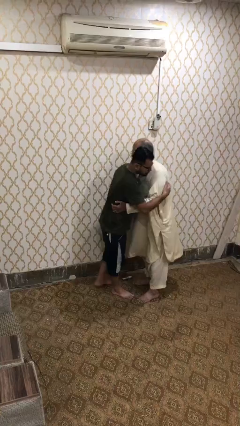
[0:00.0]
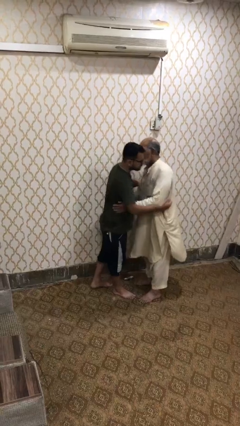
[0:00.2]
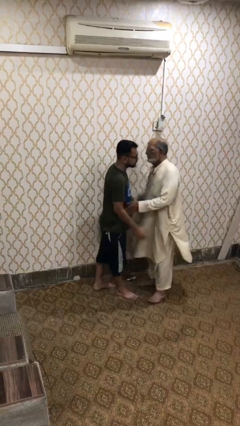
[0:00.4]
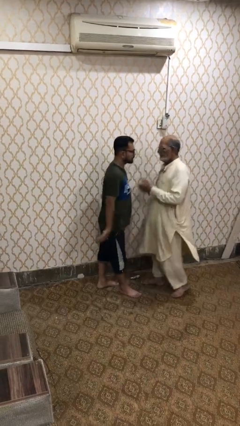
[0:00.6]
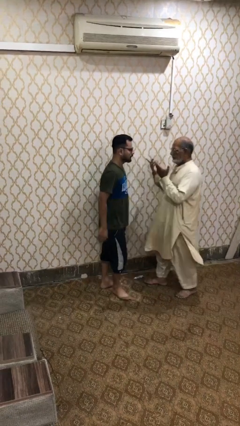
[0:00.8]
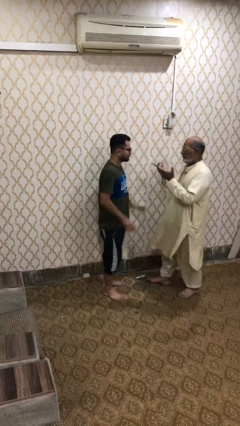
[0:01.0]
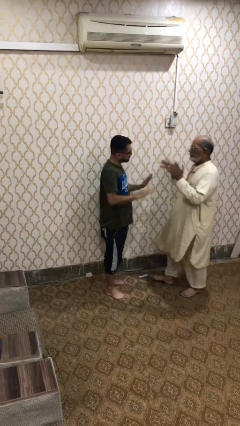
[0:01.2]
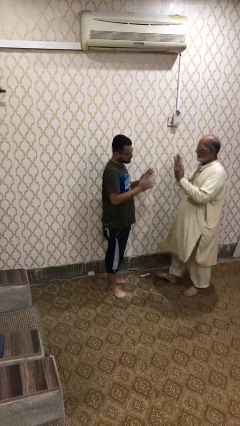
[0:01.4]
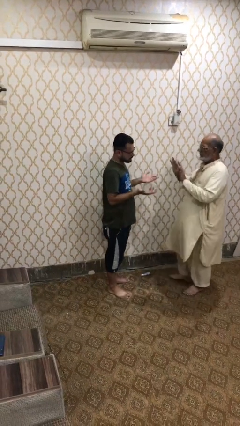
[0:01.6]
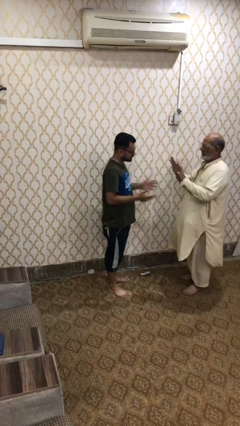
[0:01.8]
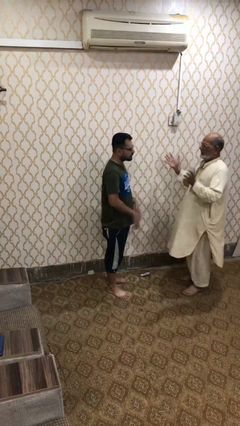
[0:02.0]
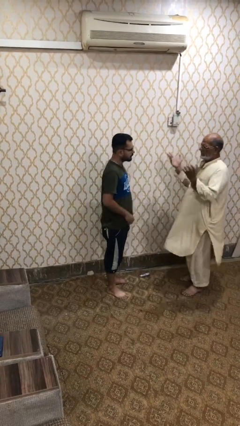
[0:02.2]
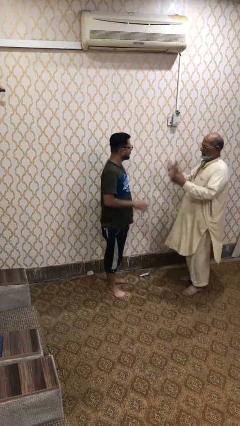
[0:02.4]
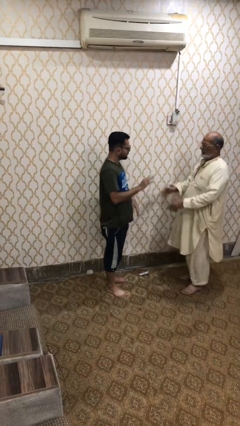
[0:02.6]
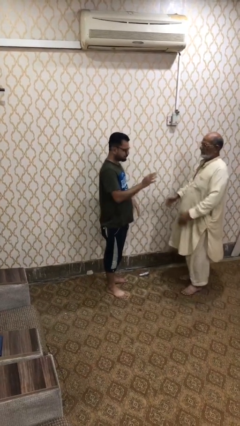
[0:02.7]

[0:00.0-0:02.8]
person talks to person

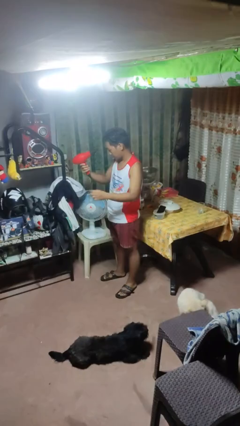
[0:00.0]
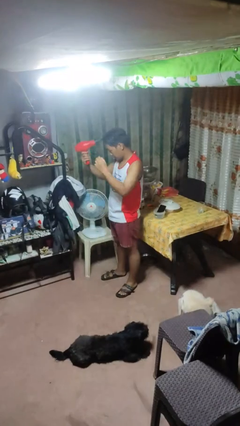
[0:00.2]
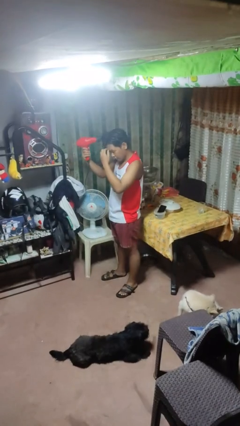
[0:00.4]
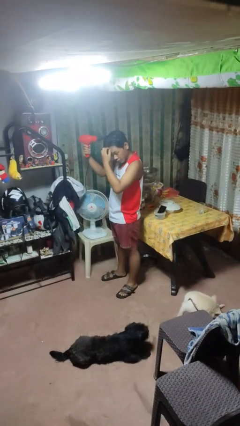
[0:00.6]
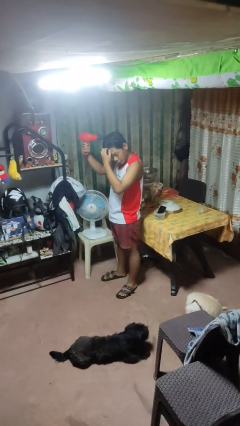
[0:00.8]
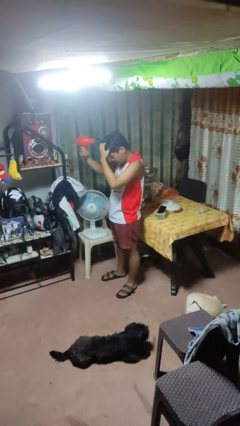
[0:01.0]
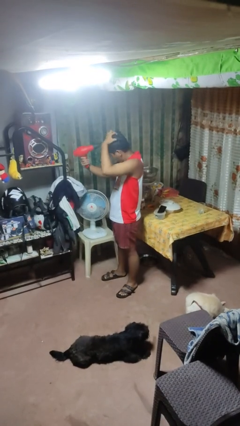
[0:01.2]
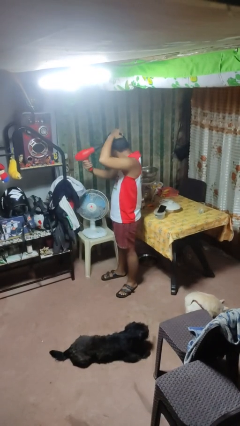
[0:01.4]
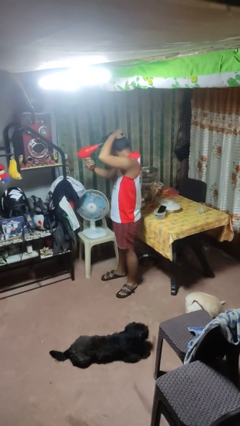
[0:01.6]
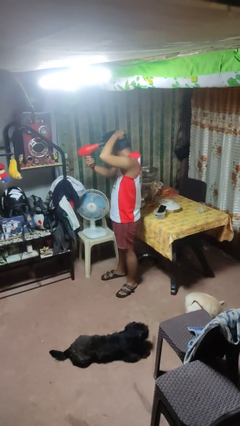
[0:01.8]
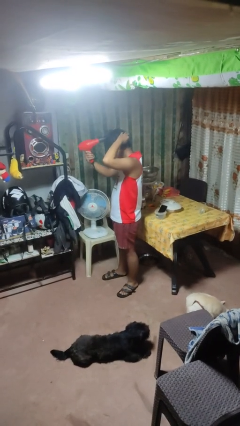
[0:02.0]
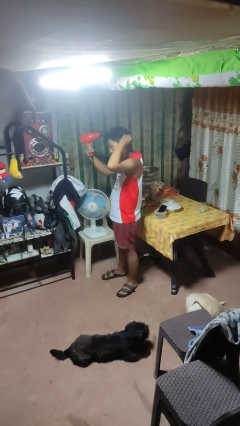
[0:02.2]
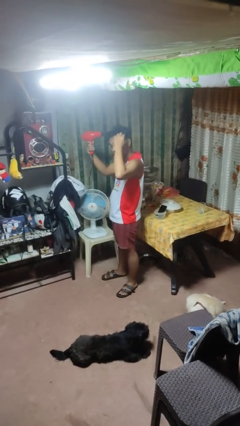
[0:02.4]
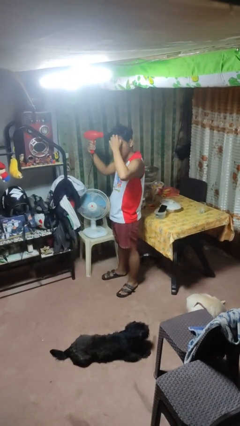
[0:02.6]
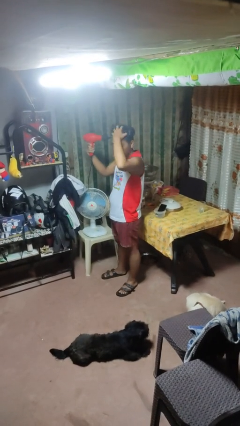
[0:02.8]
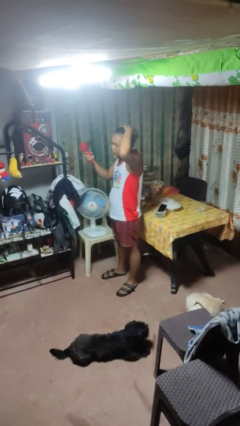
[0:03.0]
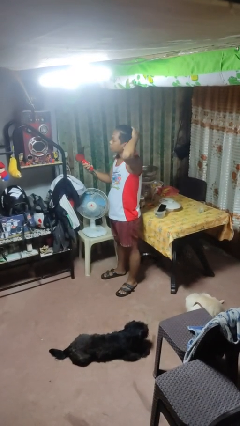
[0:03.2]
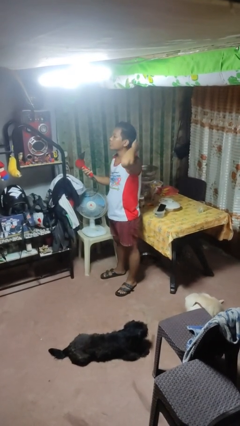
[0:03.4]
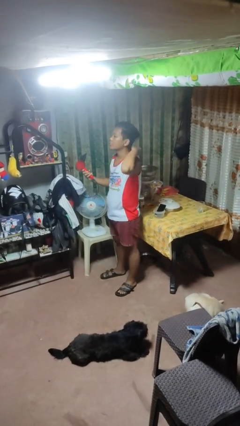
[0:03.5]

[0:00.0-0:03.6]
person dries hair with hairdryer

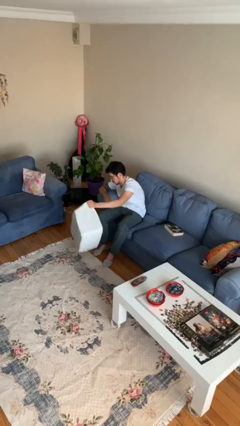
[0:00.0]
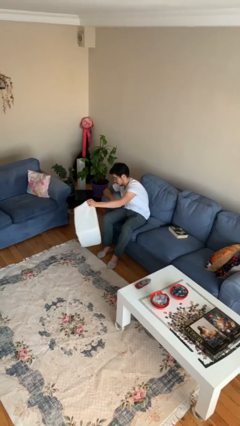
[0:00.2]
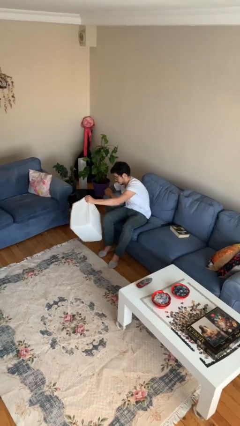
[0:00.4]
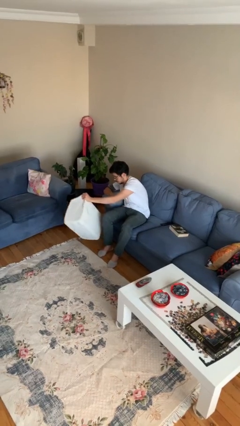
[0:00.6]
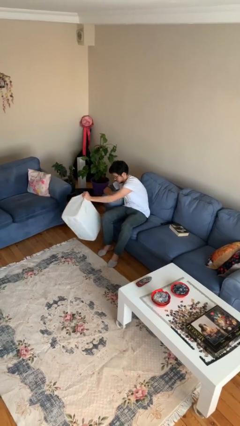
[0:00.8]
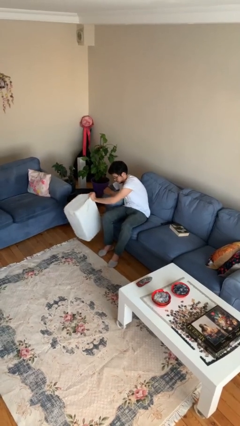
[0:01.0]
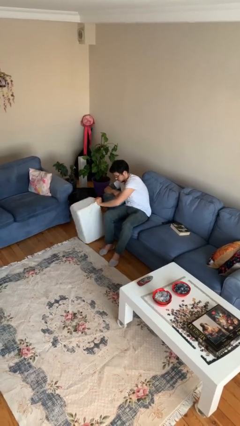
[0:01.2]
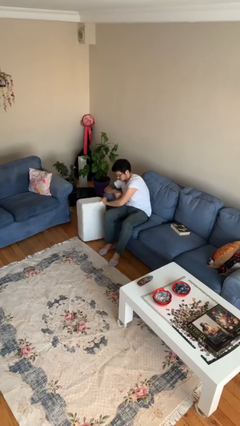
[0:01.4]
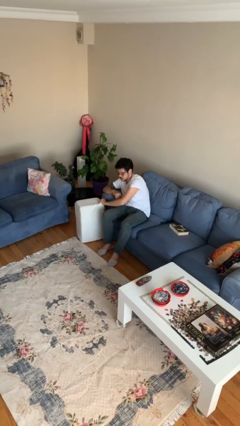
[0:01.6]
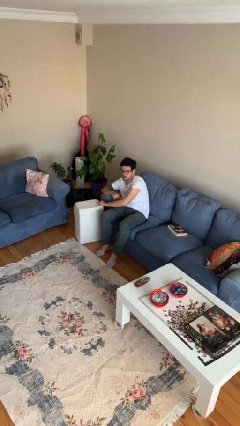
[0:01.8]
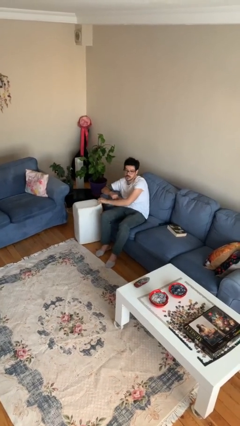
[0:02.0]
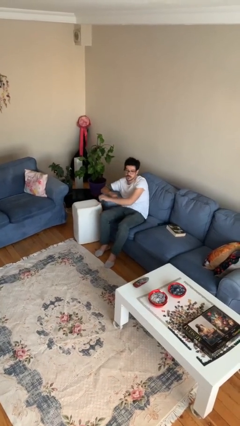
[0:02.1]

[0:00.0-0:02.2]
person puts down object on floor

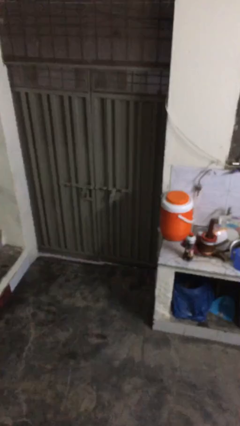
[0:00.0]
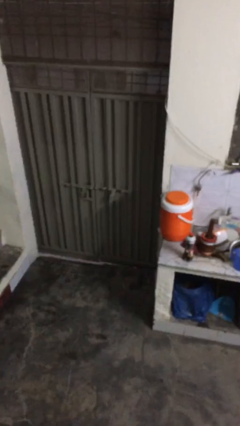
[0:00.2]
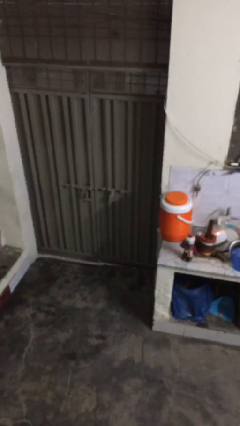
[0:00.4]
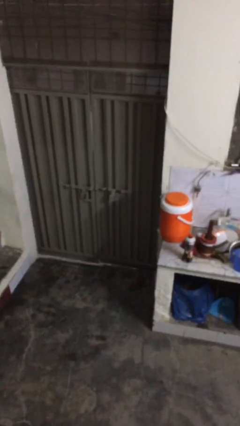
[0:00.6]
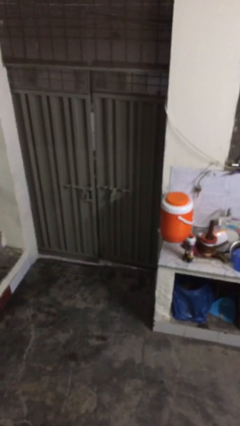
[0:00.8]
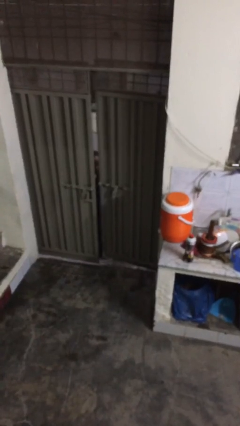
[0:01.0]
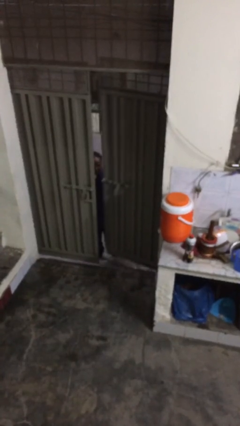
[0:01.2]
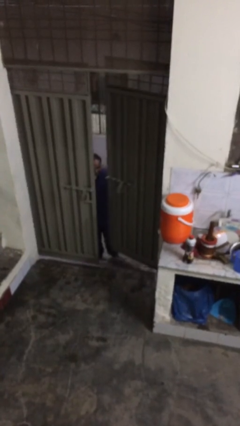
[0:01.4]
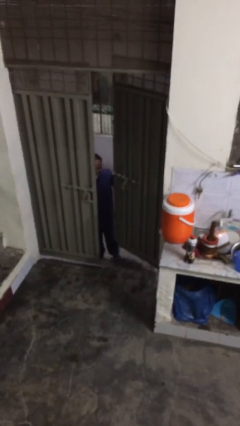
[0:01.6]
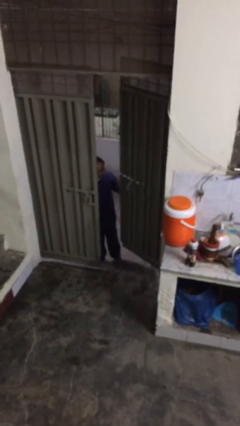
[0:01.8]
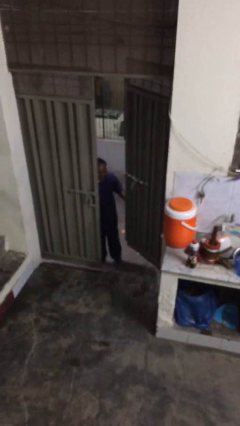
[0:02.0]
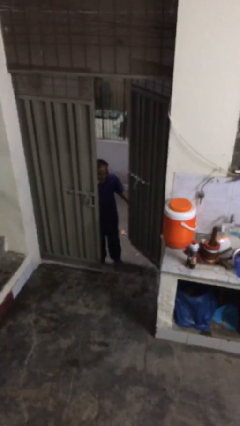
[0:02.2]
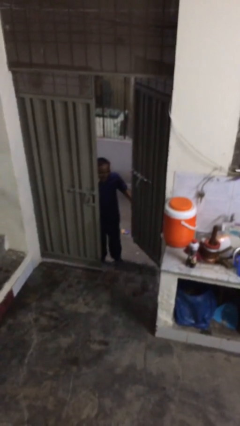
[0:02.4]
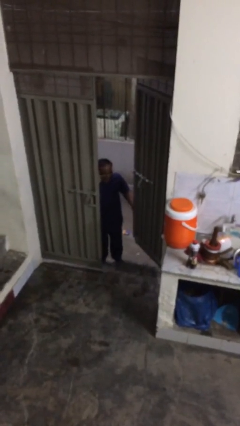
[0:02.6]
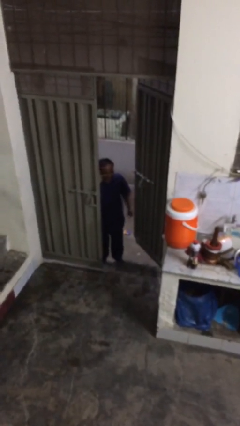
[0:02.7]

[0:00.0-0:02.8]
person opens facility door

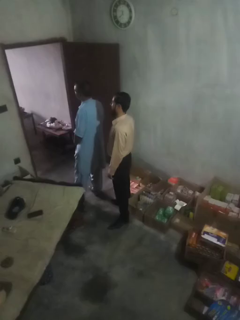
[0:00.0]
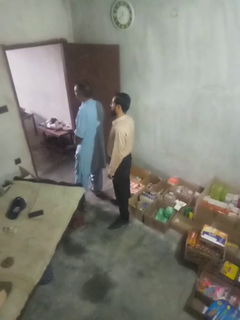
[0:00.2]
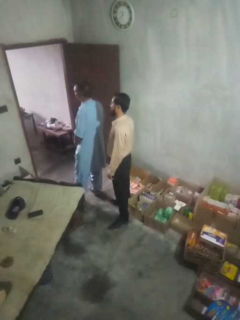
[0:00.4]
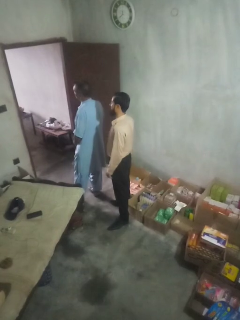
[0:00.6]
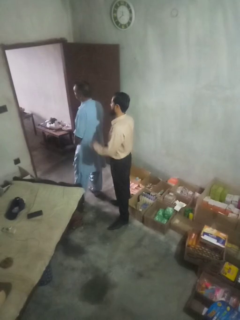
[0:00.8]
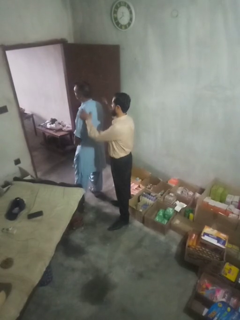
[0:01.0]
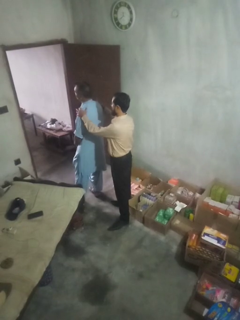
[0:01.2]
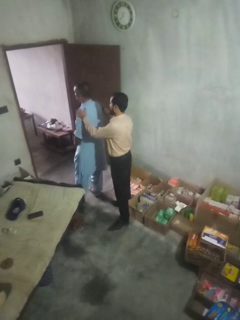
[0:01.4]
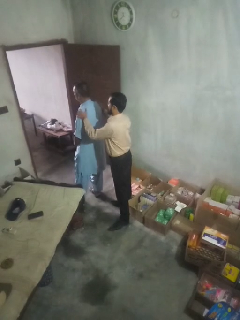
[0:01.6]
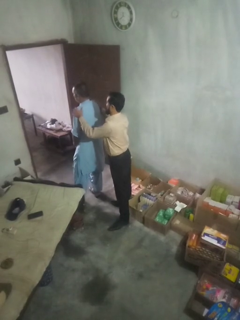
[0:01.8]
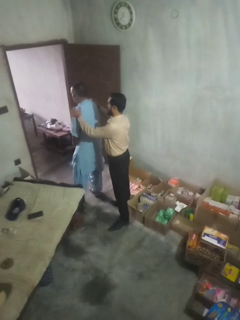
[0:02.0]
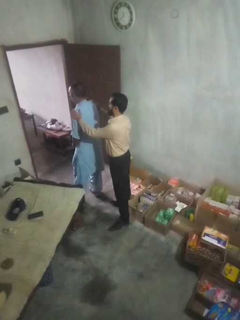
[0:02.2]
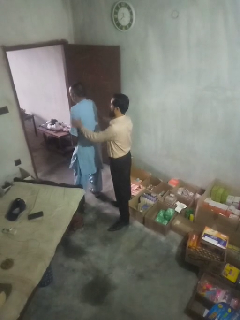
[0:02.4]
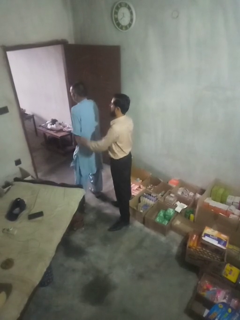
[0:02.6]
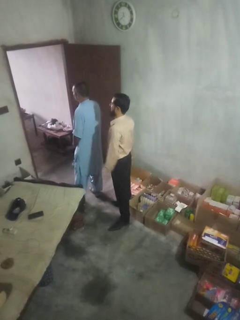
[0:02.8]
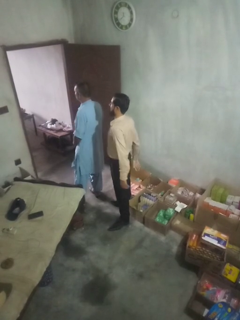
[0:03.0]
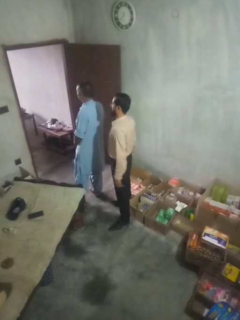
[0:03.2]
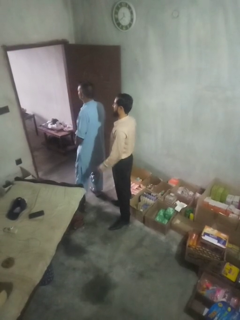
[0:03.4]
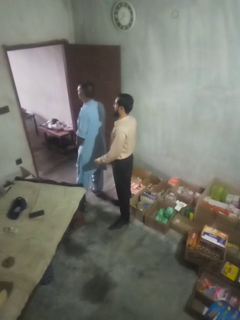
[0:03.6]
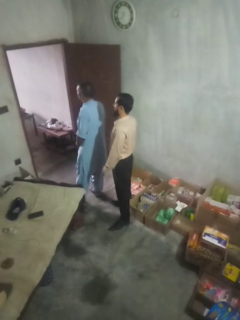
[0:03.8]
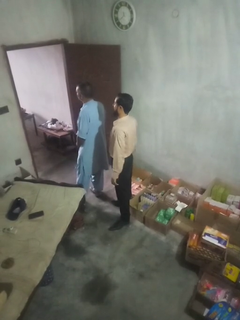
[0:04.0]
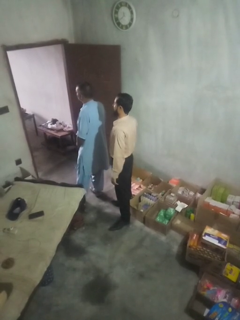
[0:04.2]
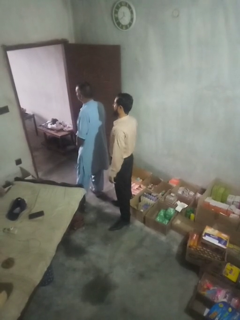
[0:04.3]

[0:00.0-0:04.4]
person pounds shoulders of person

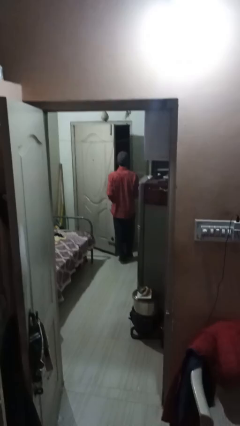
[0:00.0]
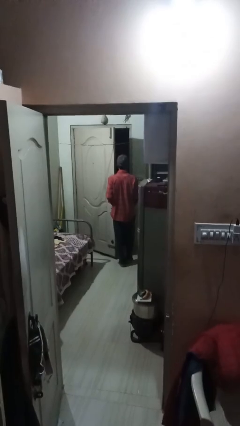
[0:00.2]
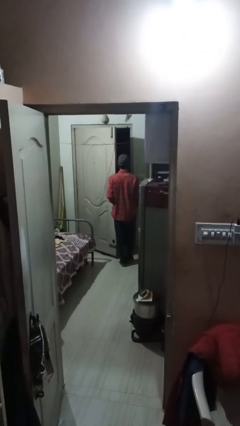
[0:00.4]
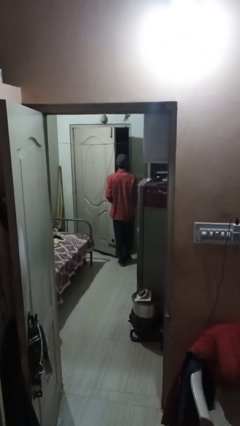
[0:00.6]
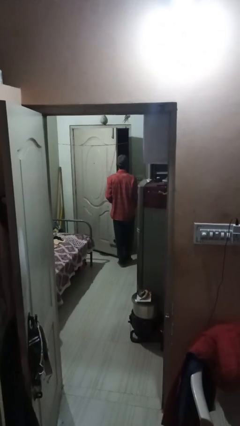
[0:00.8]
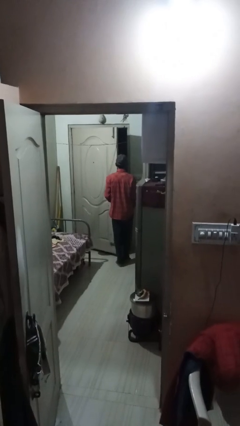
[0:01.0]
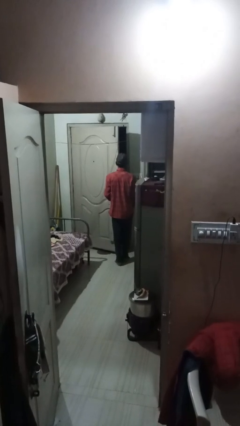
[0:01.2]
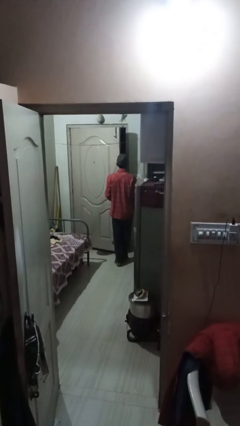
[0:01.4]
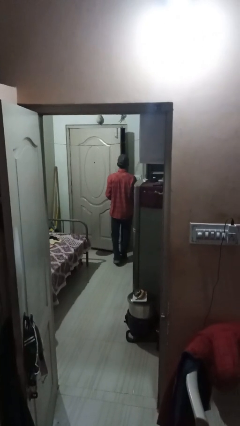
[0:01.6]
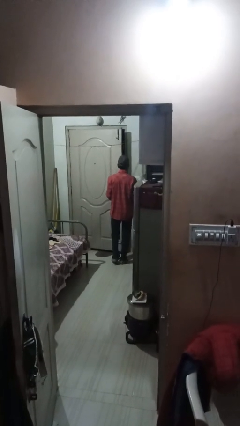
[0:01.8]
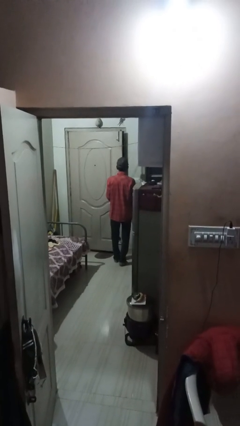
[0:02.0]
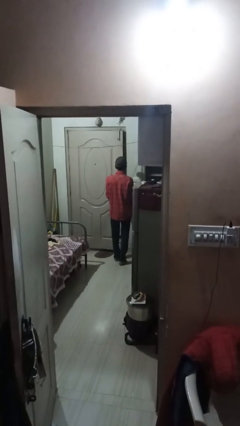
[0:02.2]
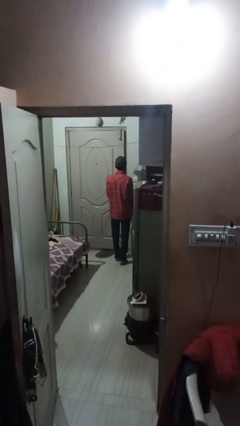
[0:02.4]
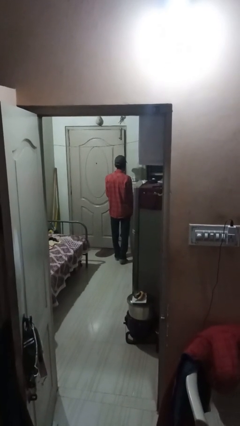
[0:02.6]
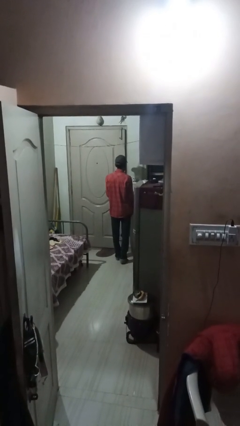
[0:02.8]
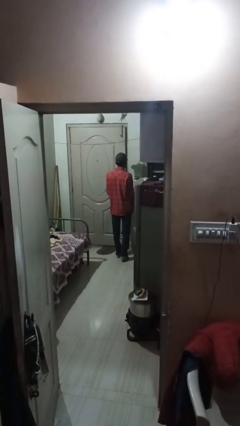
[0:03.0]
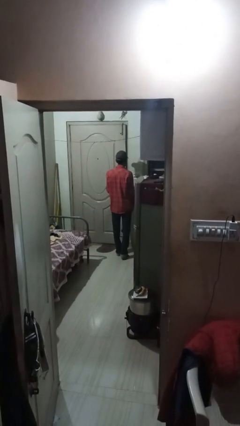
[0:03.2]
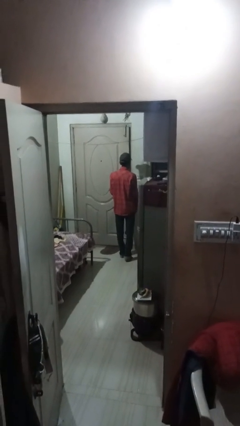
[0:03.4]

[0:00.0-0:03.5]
person closes facility door
